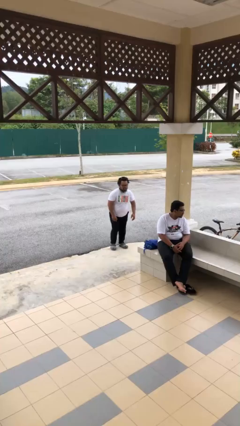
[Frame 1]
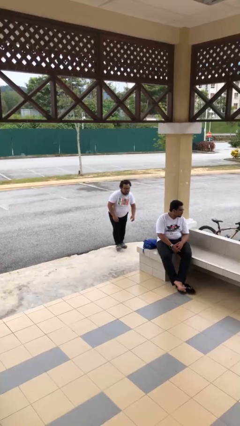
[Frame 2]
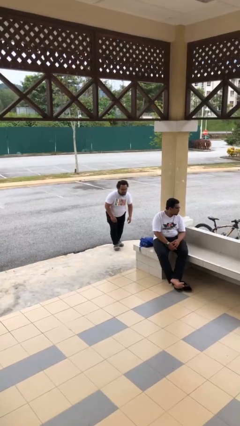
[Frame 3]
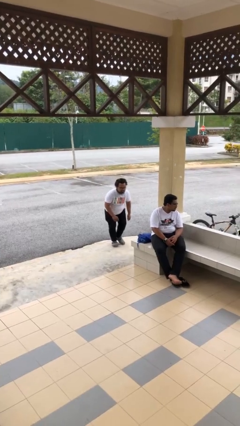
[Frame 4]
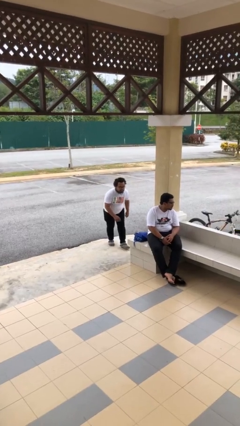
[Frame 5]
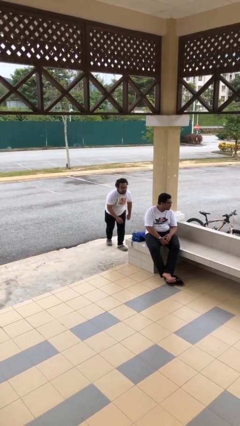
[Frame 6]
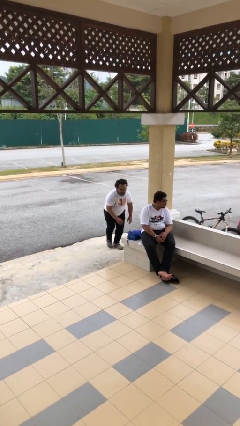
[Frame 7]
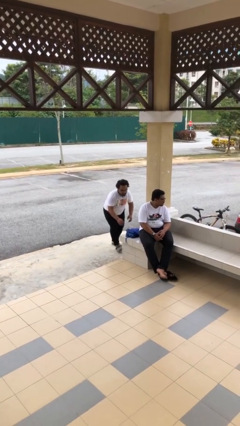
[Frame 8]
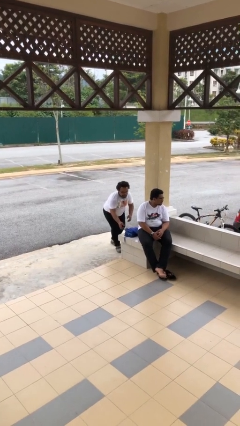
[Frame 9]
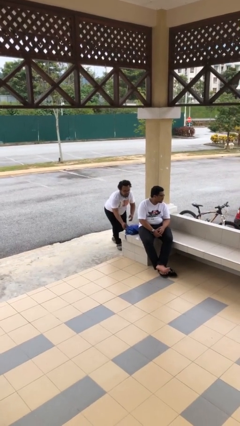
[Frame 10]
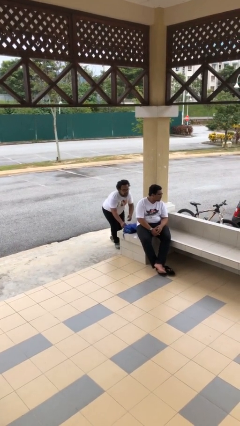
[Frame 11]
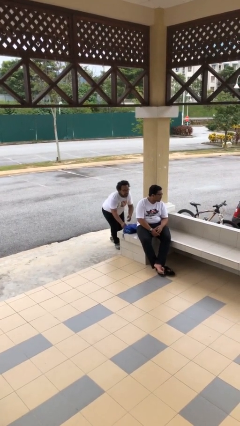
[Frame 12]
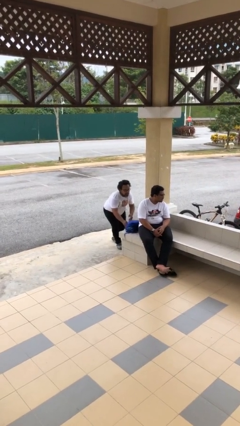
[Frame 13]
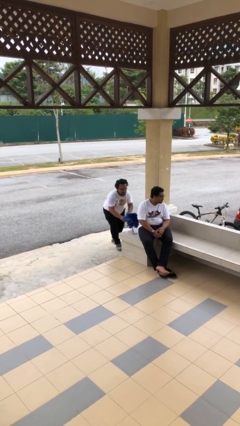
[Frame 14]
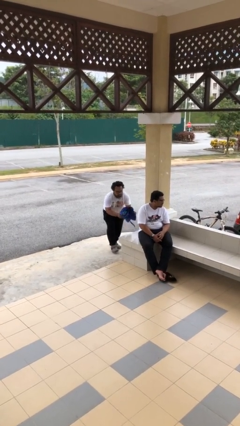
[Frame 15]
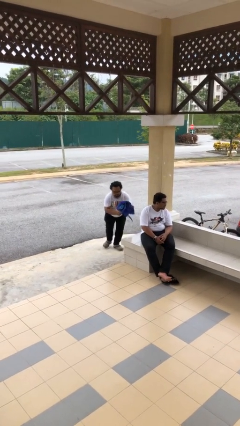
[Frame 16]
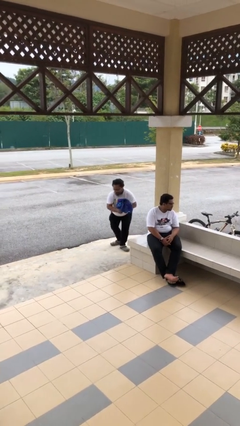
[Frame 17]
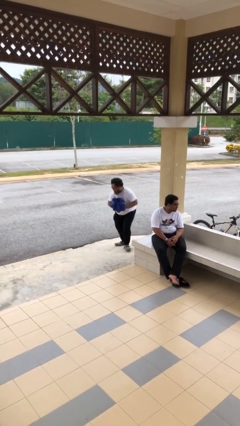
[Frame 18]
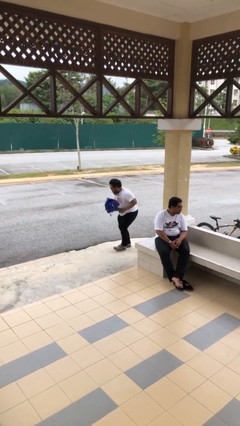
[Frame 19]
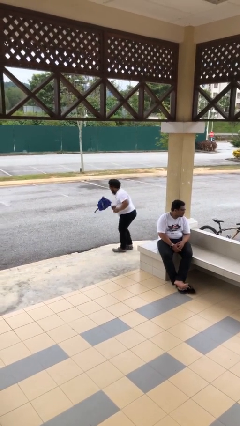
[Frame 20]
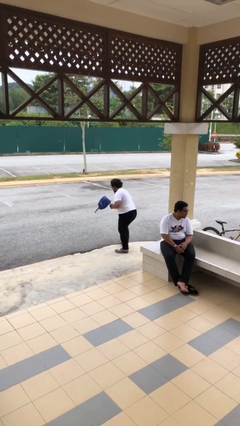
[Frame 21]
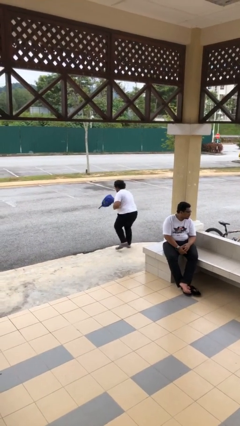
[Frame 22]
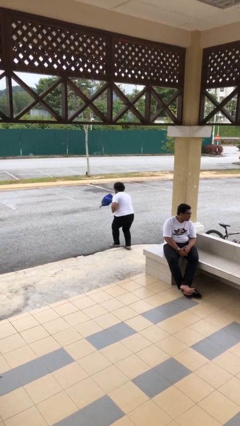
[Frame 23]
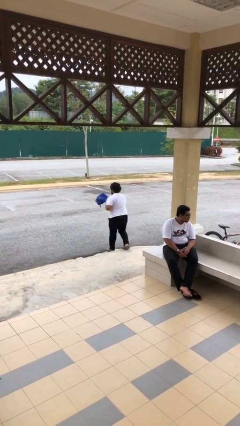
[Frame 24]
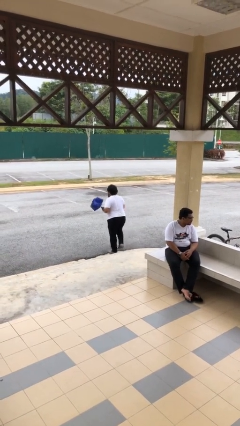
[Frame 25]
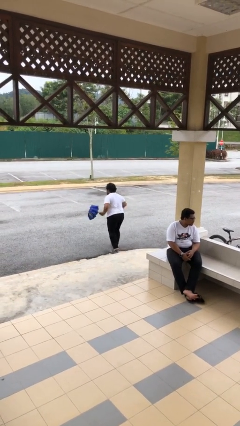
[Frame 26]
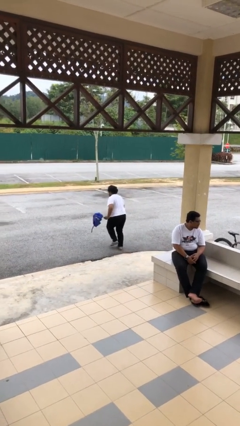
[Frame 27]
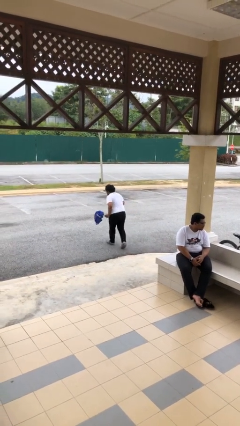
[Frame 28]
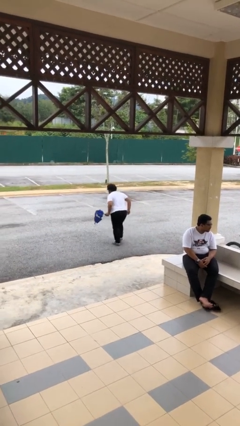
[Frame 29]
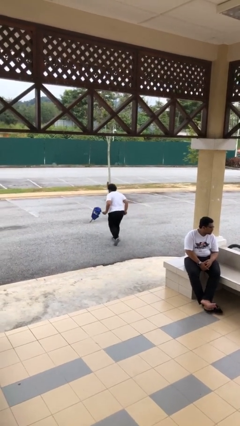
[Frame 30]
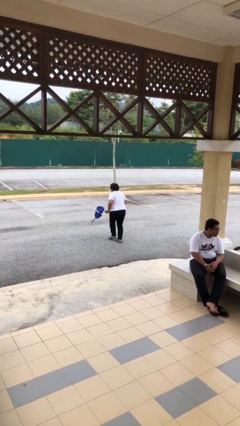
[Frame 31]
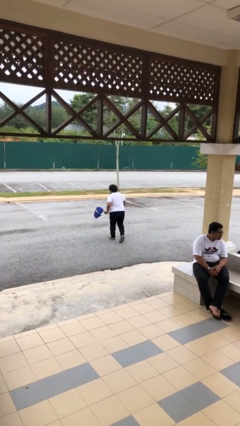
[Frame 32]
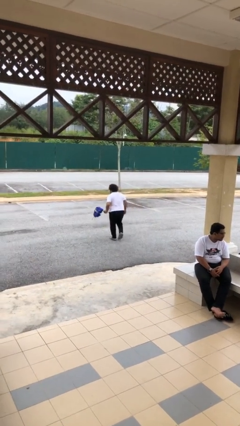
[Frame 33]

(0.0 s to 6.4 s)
person steals object from person

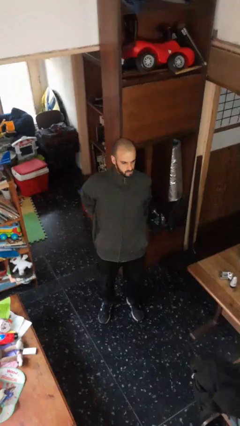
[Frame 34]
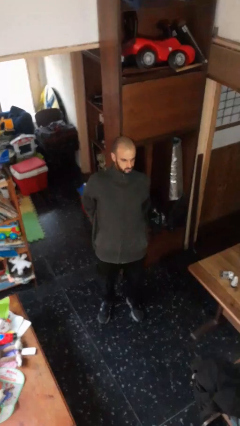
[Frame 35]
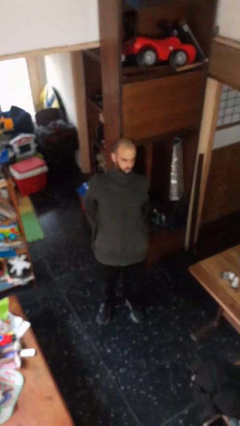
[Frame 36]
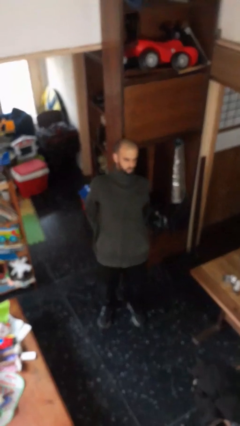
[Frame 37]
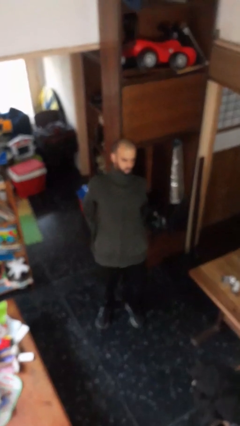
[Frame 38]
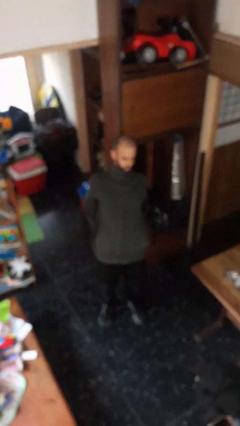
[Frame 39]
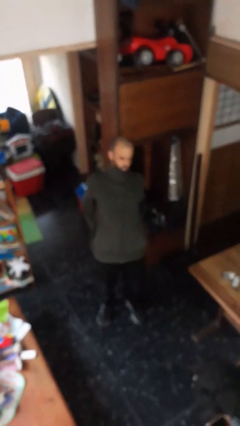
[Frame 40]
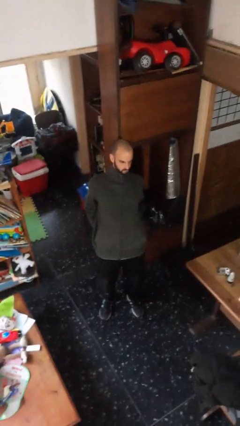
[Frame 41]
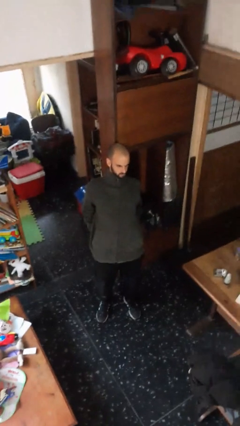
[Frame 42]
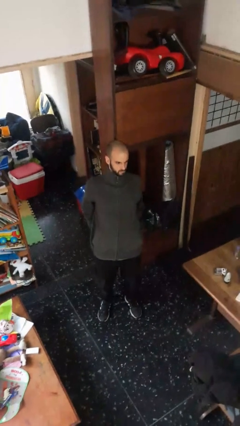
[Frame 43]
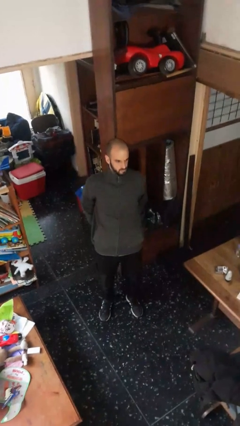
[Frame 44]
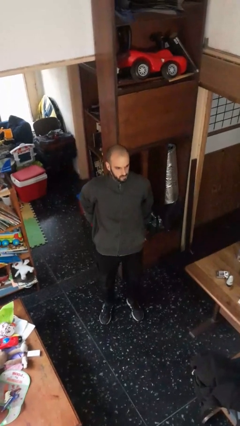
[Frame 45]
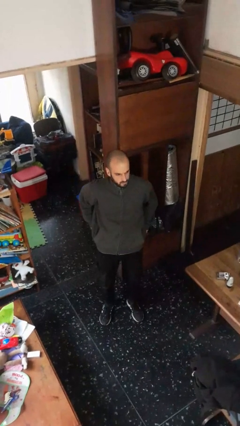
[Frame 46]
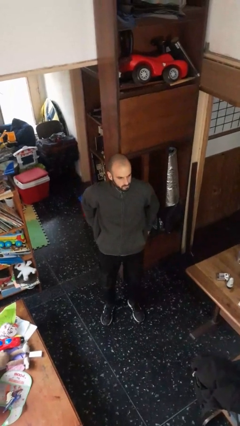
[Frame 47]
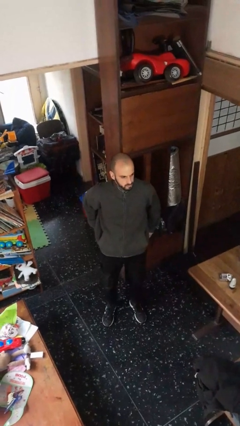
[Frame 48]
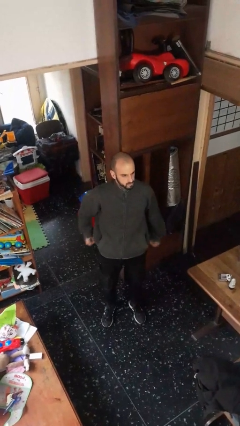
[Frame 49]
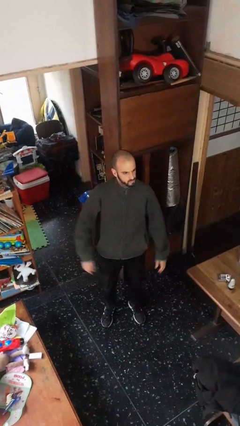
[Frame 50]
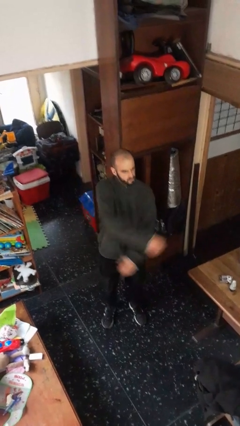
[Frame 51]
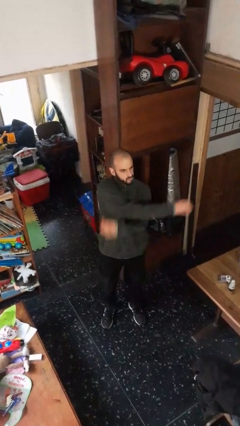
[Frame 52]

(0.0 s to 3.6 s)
person stretches back

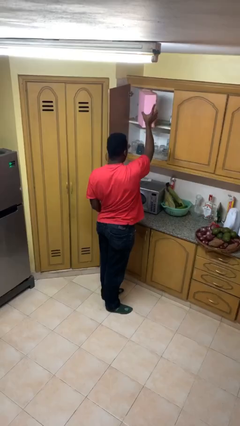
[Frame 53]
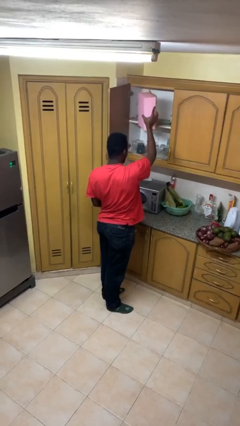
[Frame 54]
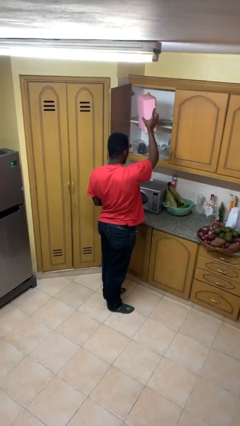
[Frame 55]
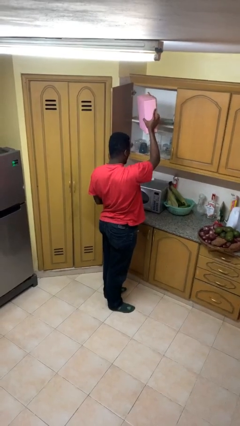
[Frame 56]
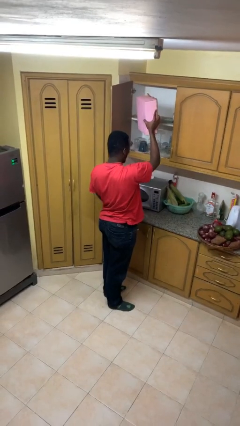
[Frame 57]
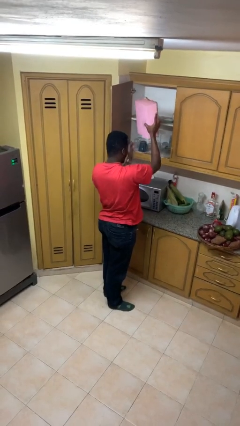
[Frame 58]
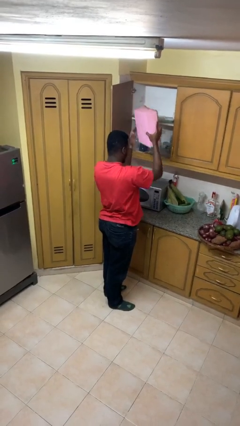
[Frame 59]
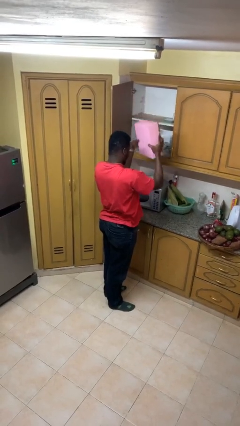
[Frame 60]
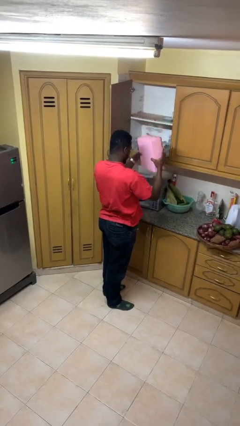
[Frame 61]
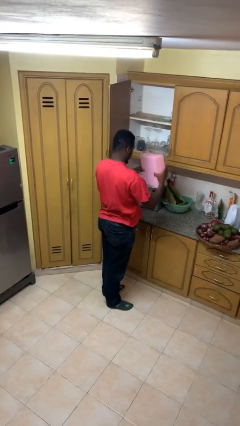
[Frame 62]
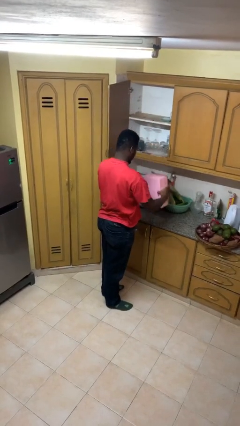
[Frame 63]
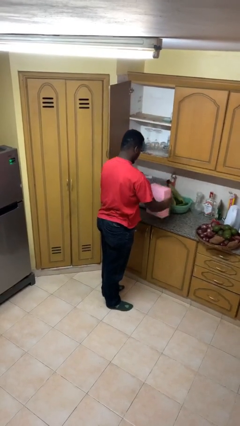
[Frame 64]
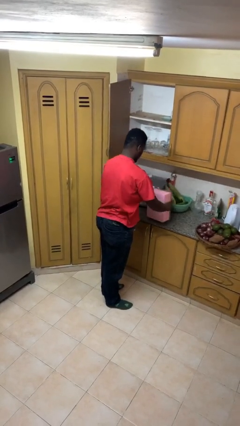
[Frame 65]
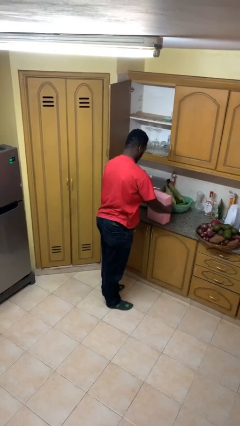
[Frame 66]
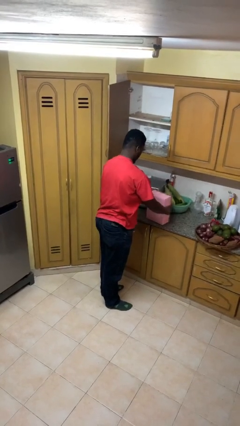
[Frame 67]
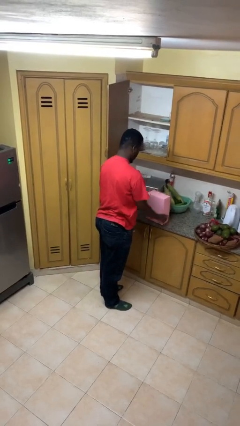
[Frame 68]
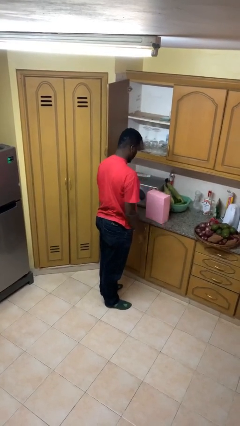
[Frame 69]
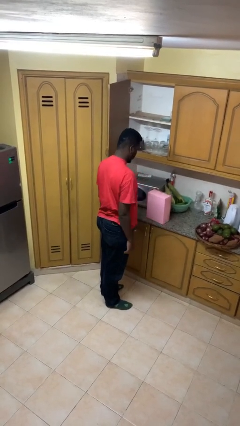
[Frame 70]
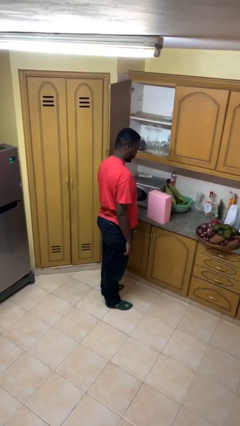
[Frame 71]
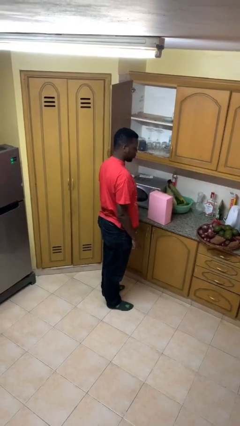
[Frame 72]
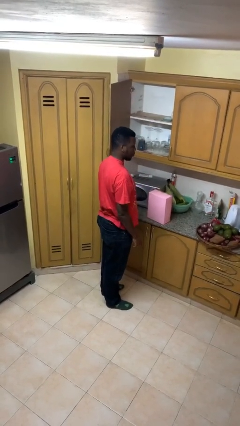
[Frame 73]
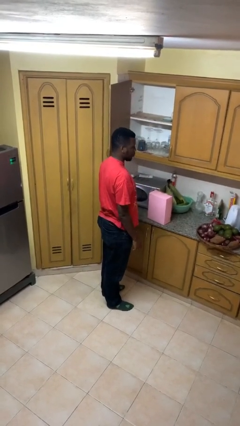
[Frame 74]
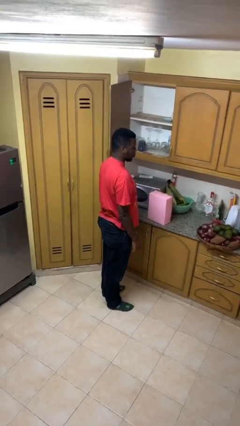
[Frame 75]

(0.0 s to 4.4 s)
person puts down object on table

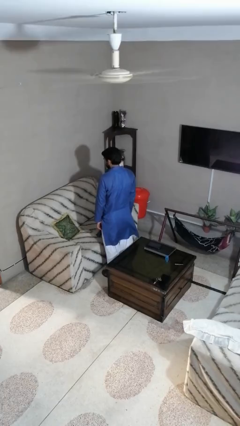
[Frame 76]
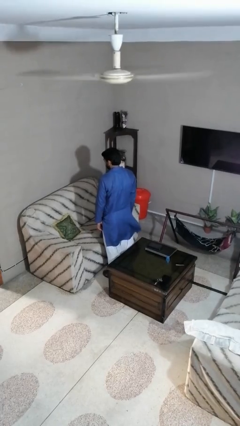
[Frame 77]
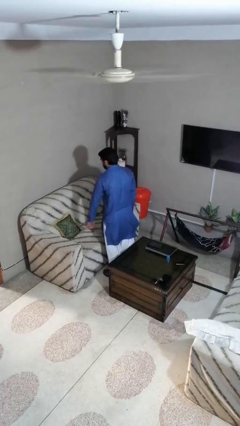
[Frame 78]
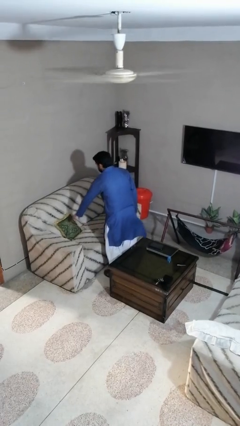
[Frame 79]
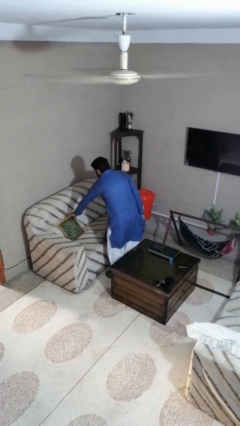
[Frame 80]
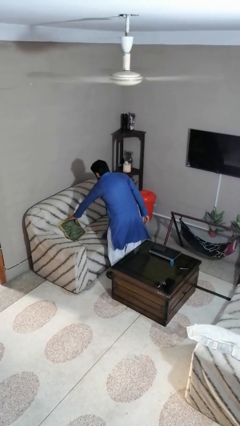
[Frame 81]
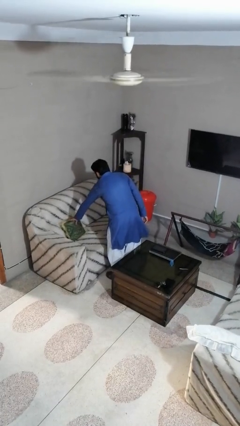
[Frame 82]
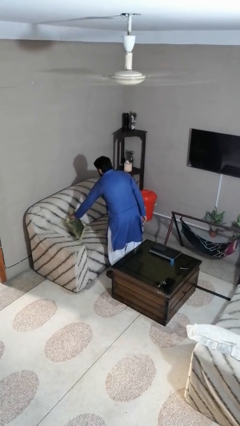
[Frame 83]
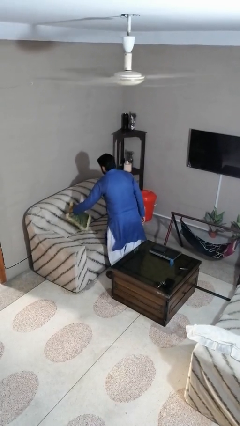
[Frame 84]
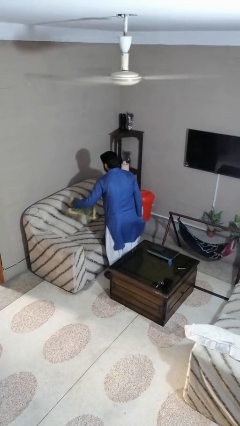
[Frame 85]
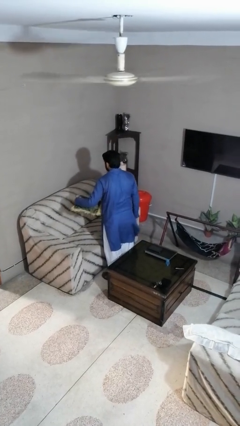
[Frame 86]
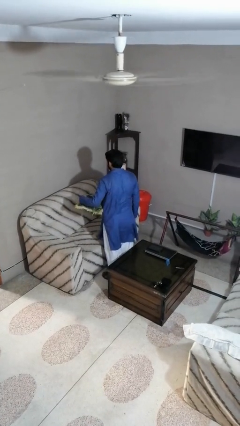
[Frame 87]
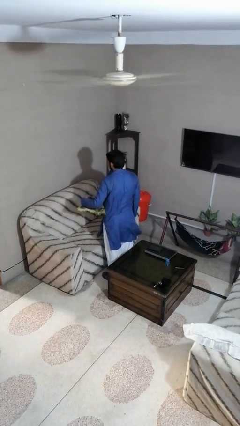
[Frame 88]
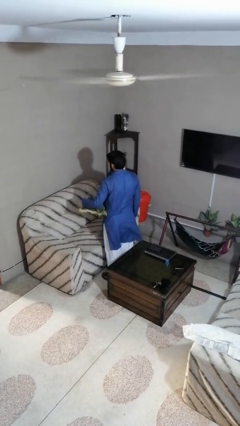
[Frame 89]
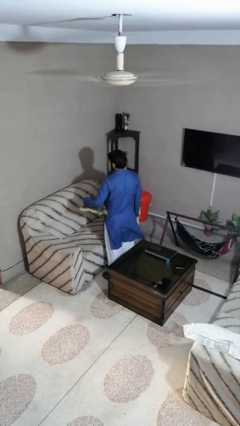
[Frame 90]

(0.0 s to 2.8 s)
person picks up object from couch

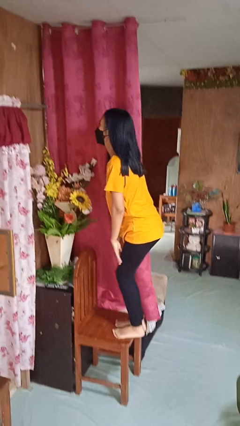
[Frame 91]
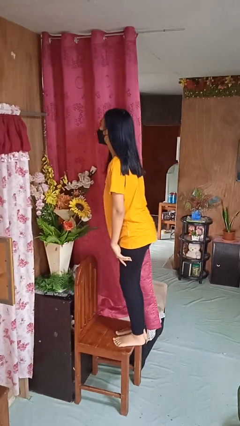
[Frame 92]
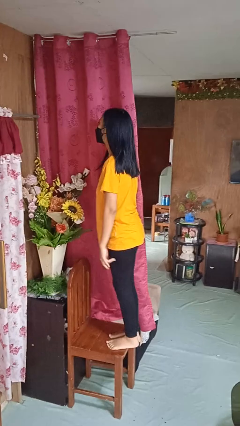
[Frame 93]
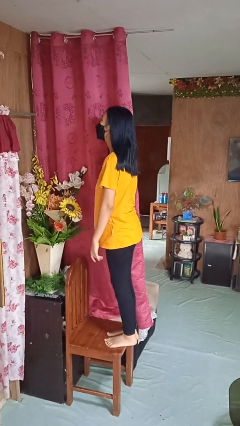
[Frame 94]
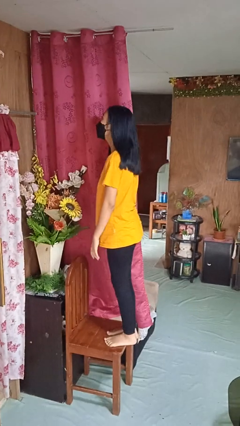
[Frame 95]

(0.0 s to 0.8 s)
person climbs on chair
